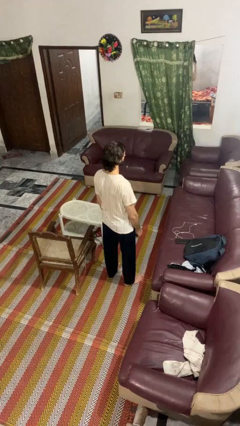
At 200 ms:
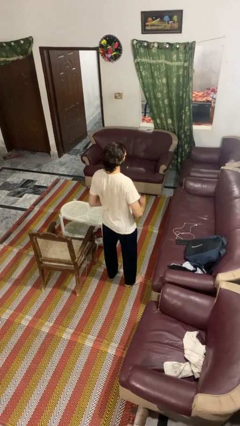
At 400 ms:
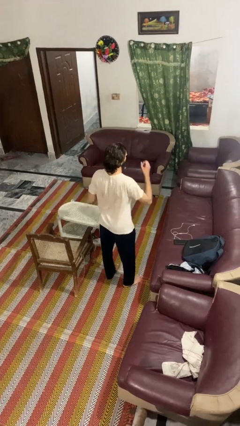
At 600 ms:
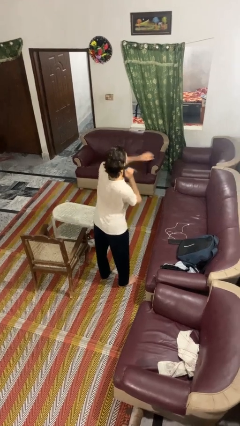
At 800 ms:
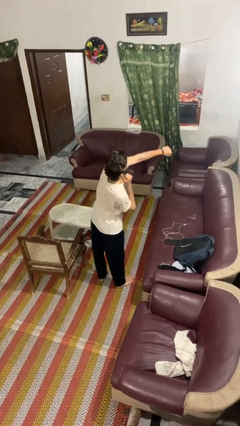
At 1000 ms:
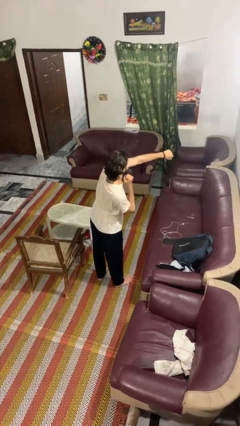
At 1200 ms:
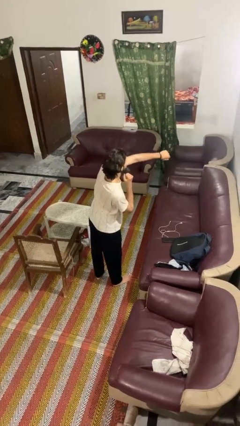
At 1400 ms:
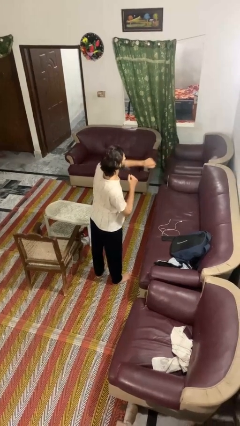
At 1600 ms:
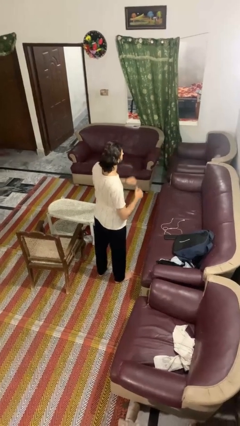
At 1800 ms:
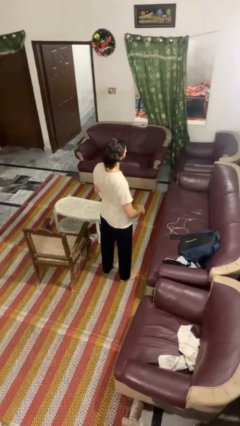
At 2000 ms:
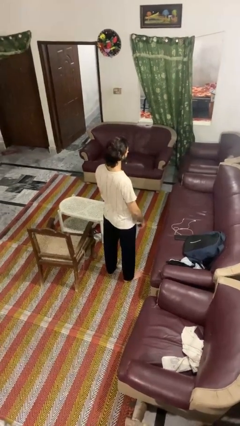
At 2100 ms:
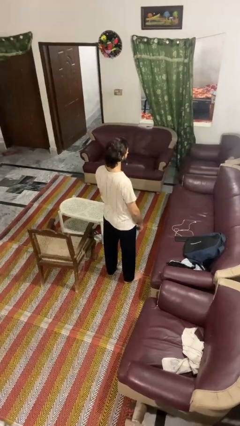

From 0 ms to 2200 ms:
person punches

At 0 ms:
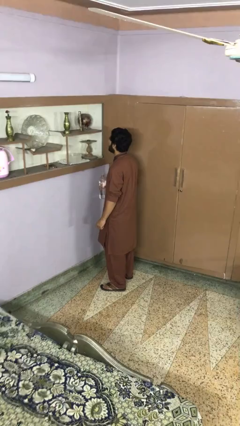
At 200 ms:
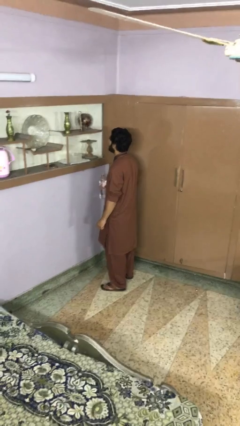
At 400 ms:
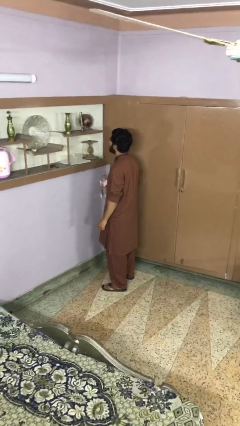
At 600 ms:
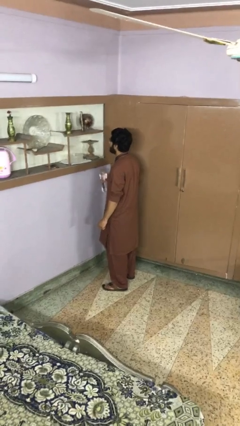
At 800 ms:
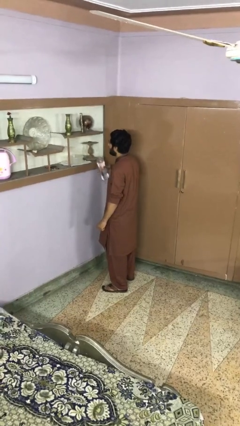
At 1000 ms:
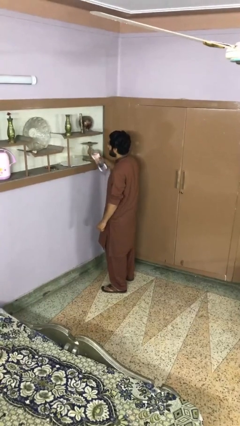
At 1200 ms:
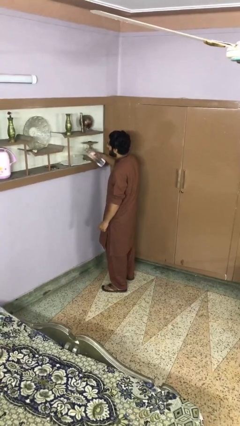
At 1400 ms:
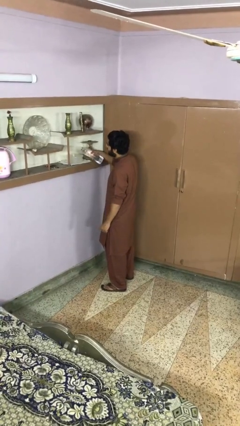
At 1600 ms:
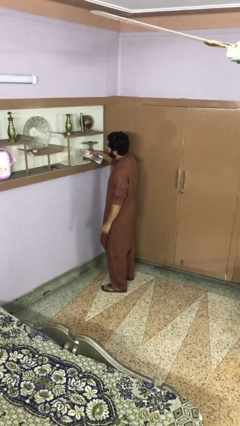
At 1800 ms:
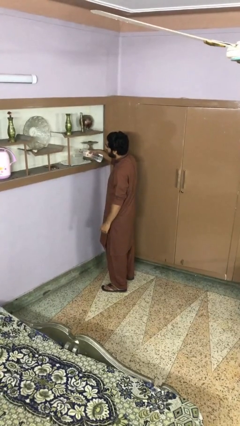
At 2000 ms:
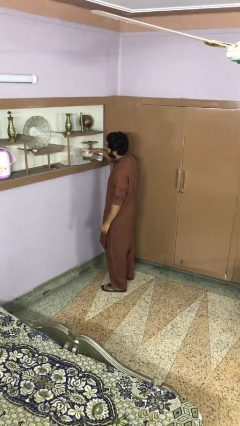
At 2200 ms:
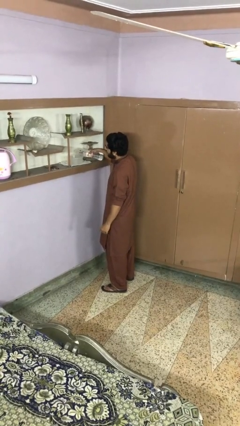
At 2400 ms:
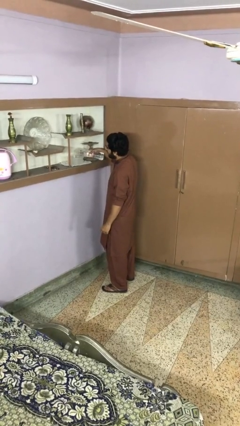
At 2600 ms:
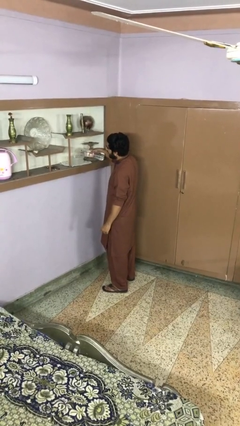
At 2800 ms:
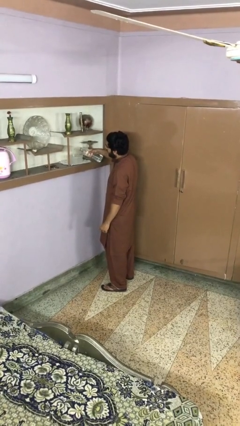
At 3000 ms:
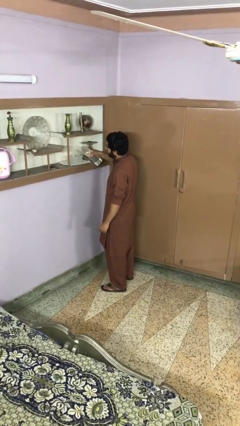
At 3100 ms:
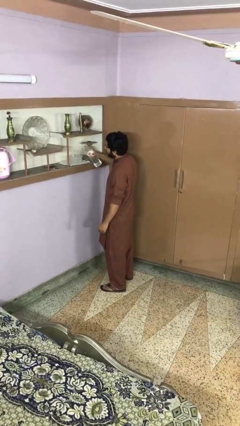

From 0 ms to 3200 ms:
person pours into bowl

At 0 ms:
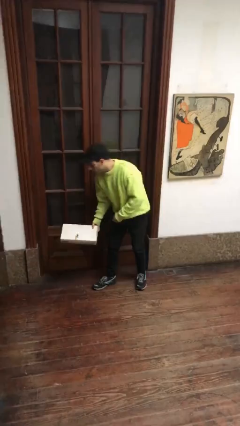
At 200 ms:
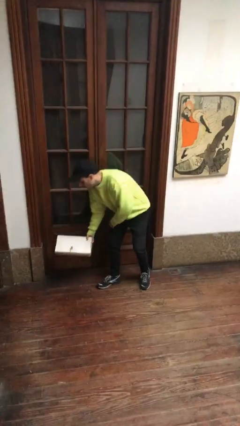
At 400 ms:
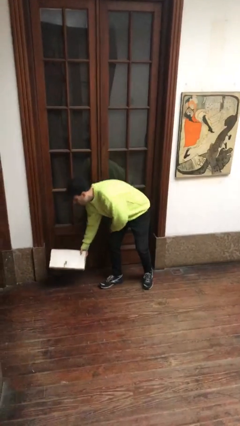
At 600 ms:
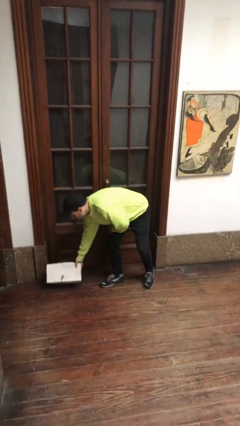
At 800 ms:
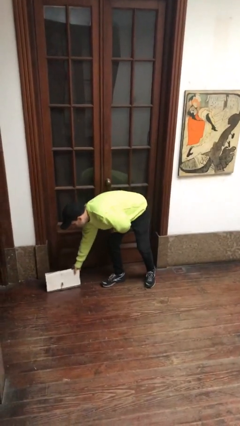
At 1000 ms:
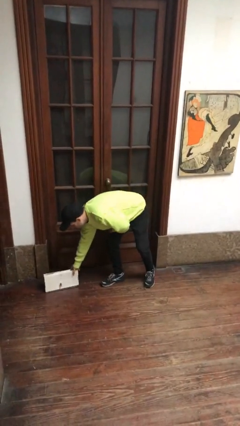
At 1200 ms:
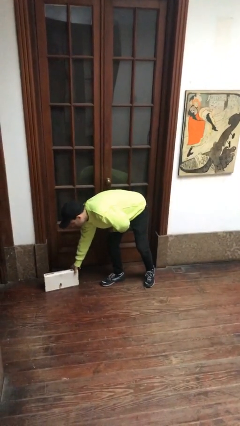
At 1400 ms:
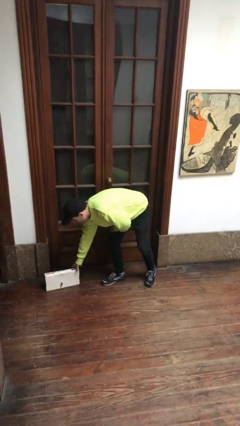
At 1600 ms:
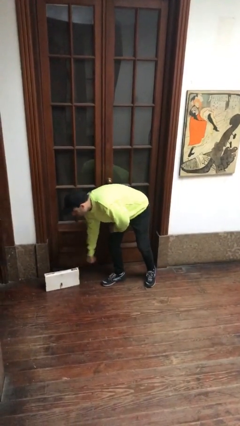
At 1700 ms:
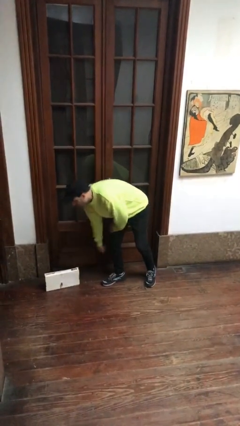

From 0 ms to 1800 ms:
person puts down object on floor

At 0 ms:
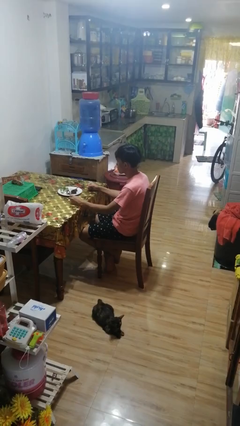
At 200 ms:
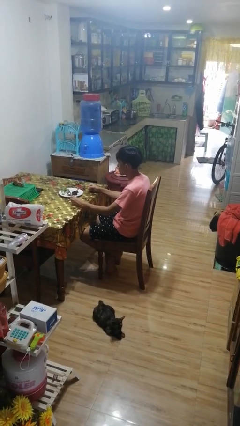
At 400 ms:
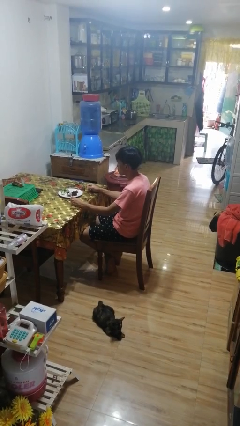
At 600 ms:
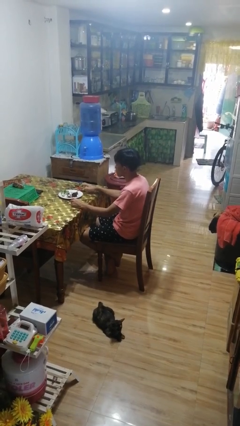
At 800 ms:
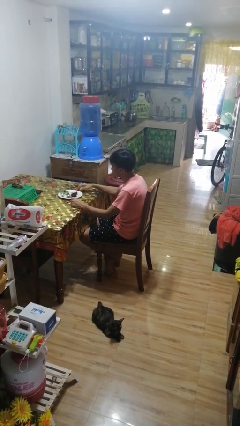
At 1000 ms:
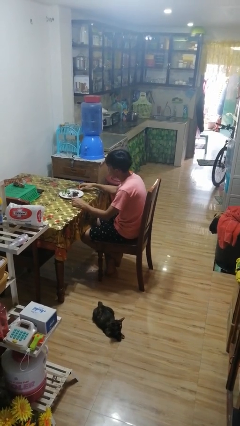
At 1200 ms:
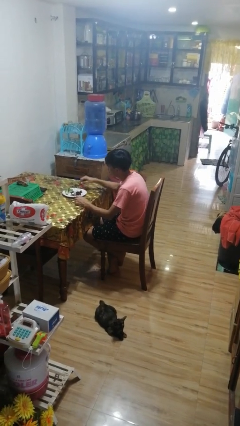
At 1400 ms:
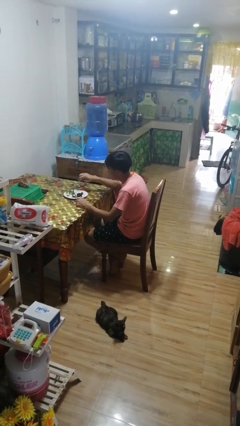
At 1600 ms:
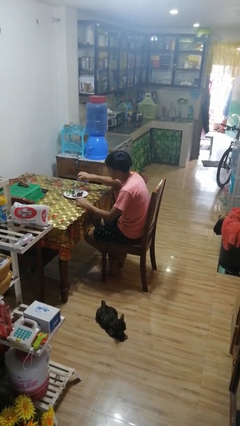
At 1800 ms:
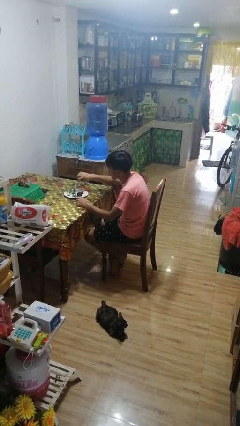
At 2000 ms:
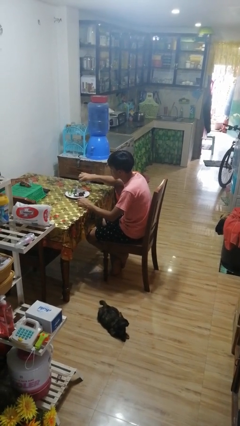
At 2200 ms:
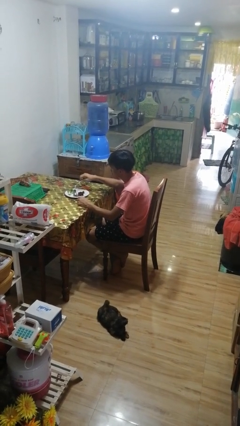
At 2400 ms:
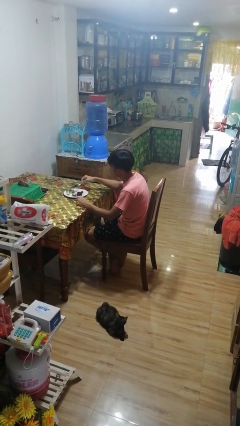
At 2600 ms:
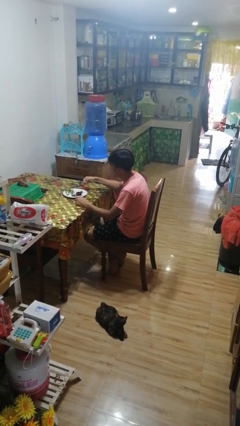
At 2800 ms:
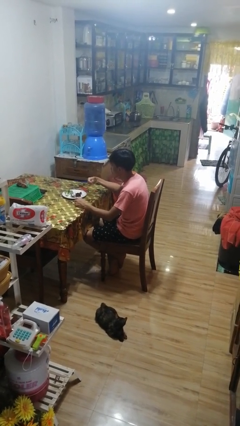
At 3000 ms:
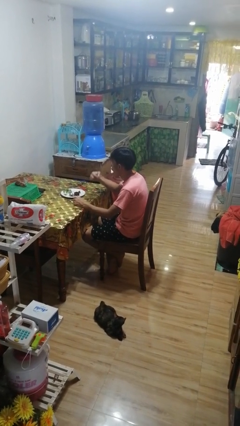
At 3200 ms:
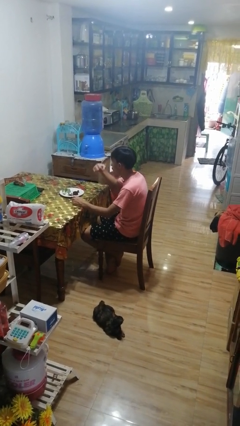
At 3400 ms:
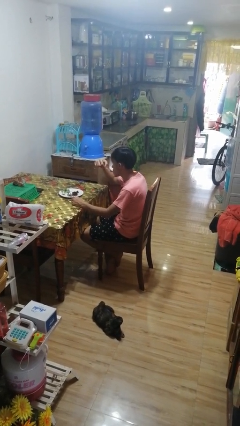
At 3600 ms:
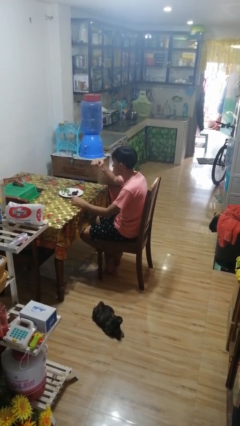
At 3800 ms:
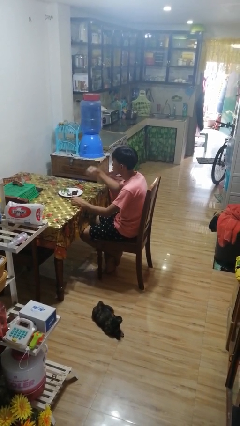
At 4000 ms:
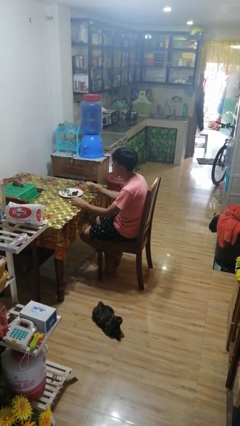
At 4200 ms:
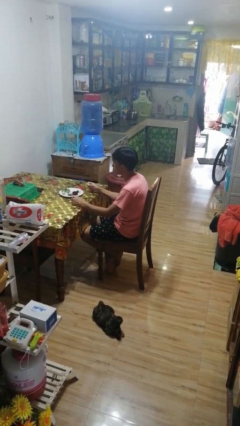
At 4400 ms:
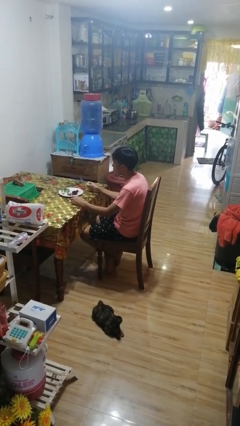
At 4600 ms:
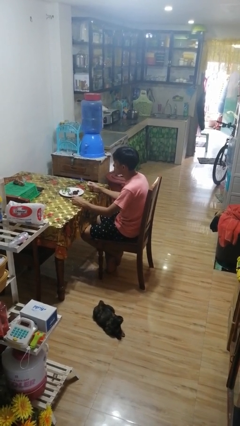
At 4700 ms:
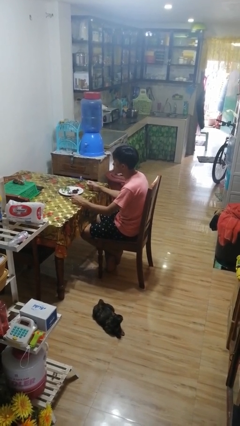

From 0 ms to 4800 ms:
person eats with utensil

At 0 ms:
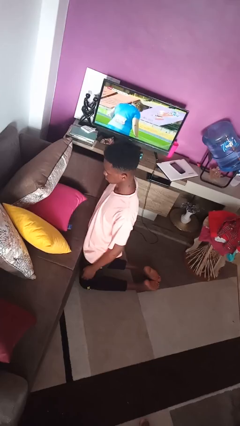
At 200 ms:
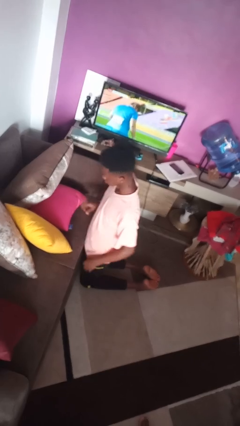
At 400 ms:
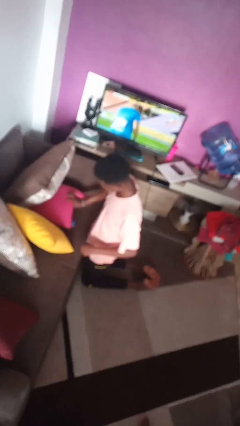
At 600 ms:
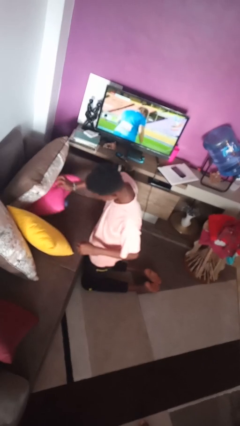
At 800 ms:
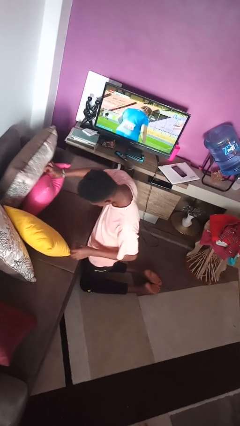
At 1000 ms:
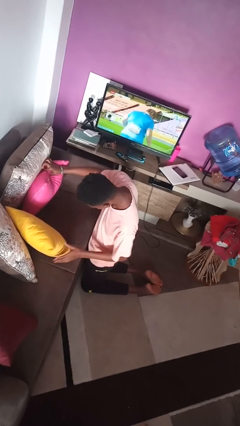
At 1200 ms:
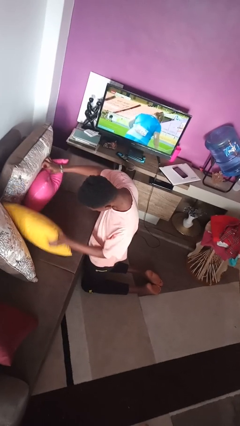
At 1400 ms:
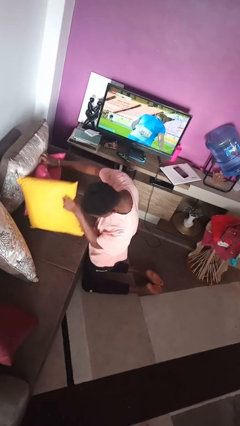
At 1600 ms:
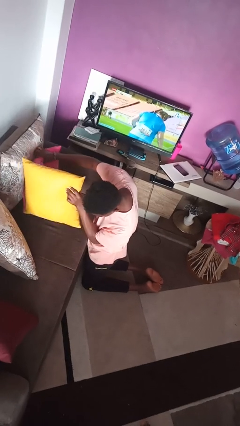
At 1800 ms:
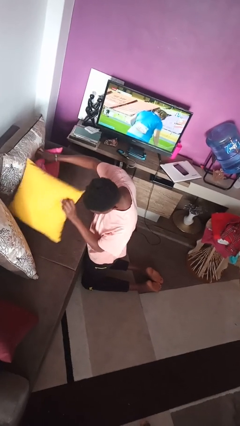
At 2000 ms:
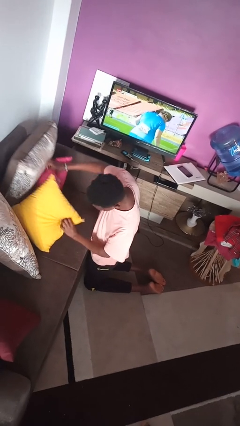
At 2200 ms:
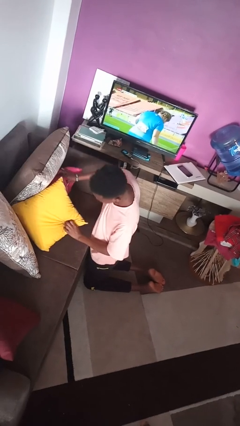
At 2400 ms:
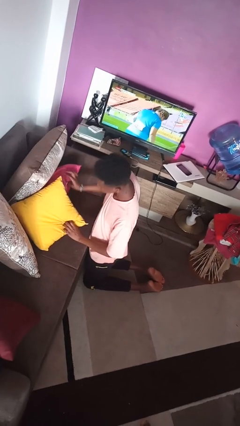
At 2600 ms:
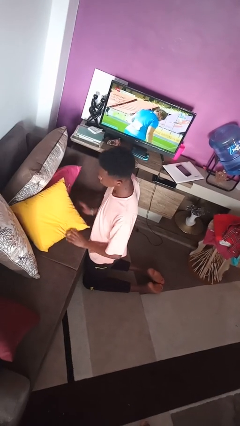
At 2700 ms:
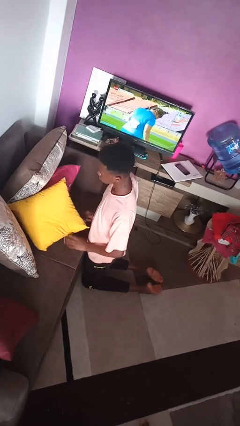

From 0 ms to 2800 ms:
person searches in couch

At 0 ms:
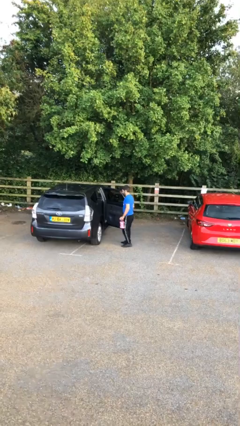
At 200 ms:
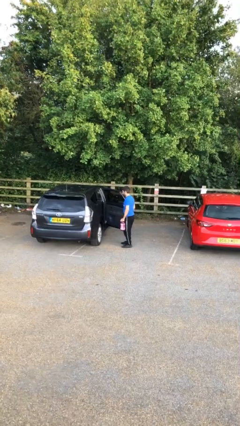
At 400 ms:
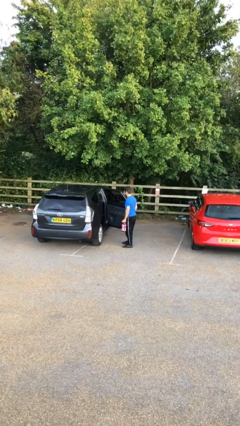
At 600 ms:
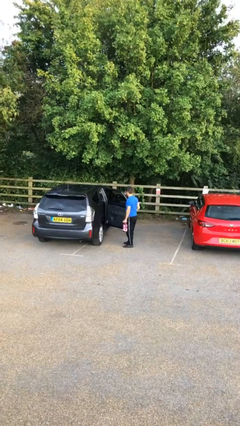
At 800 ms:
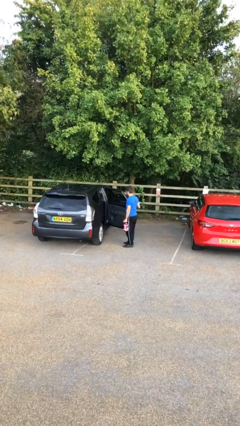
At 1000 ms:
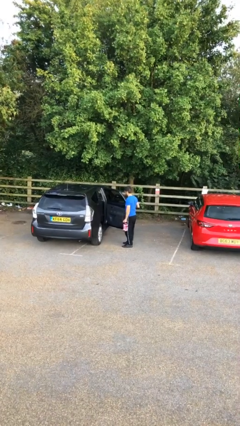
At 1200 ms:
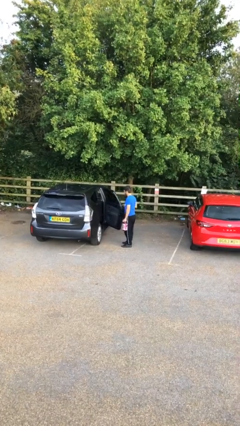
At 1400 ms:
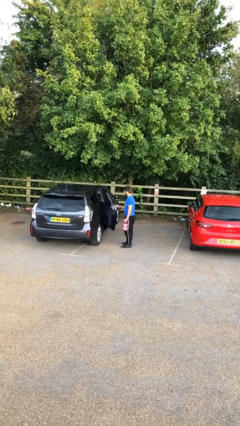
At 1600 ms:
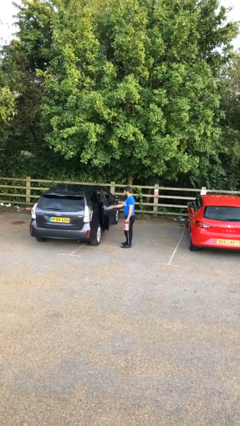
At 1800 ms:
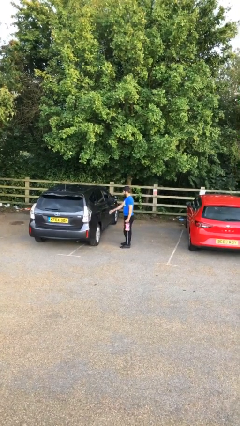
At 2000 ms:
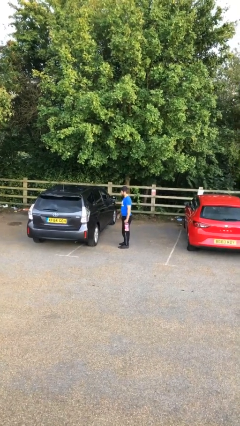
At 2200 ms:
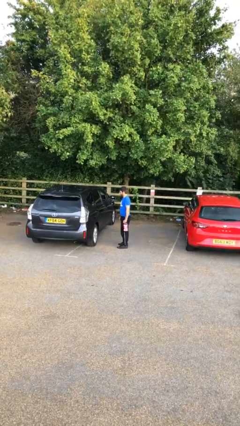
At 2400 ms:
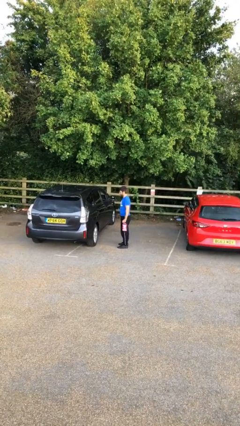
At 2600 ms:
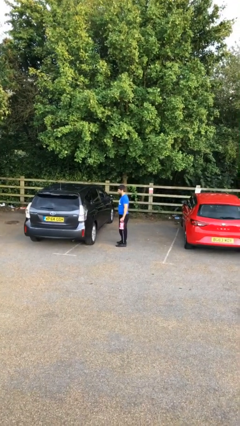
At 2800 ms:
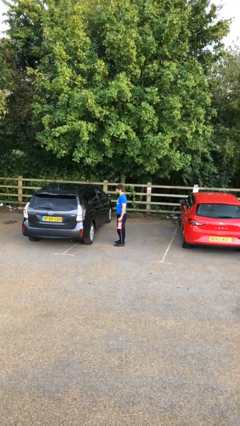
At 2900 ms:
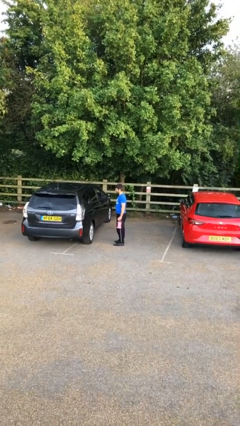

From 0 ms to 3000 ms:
person closes car door
